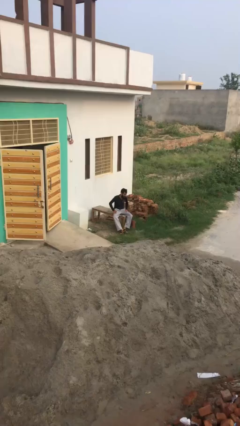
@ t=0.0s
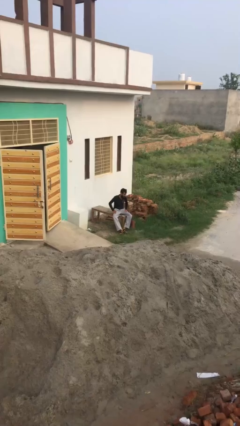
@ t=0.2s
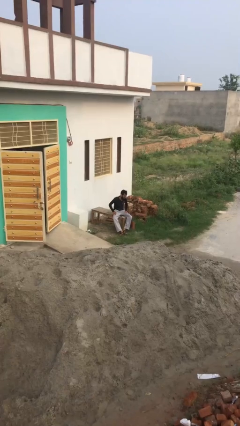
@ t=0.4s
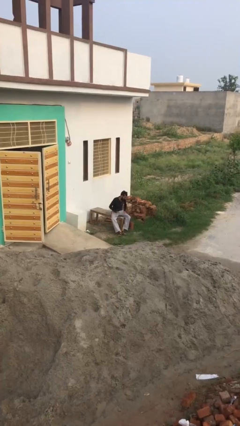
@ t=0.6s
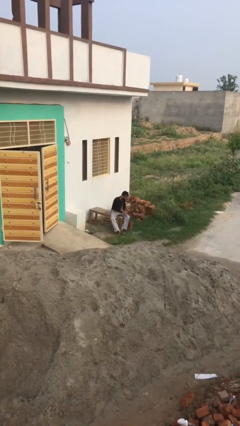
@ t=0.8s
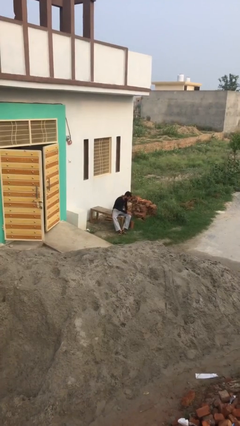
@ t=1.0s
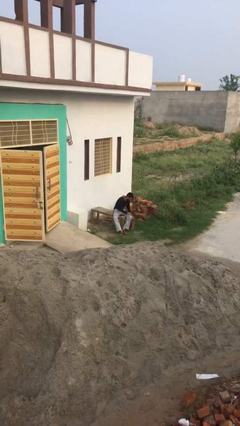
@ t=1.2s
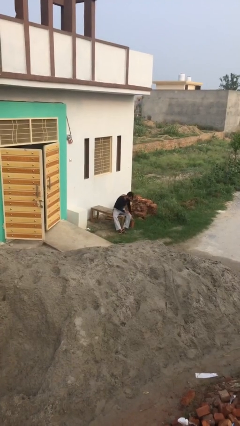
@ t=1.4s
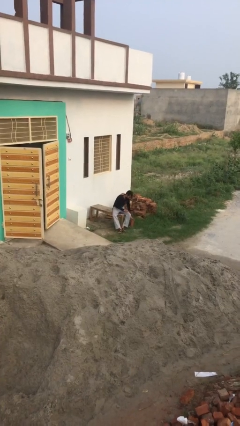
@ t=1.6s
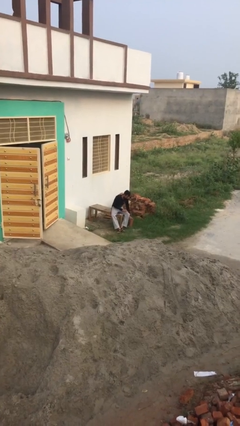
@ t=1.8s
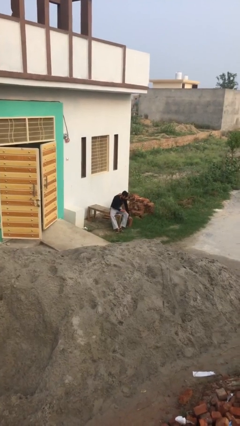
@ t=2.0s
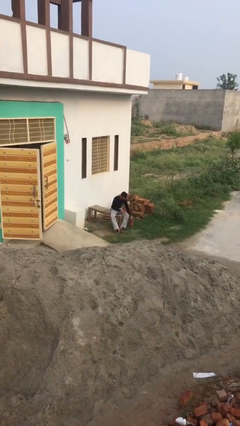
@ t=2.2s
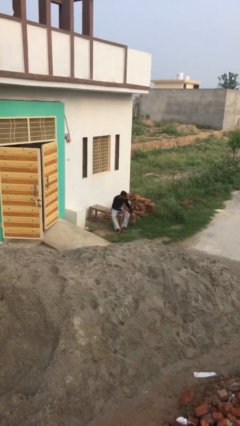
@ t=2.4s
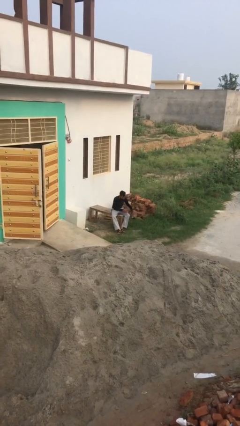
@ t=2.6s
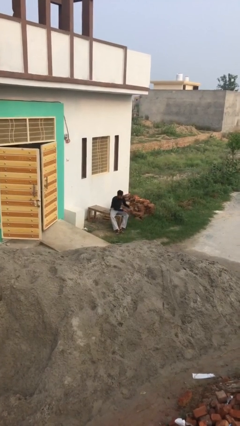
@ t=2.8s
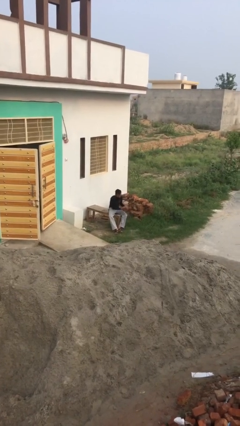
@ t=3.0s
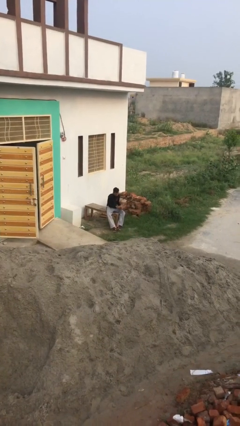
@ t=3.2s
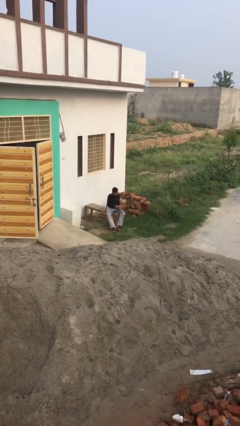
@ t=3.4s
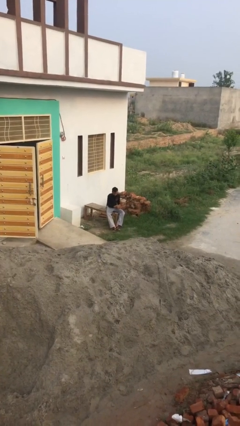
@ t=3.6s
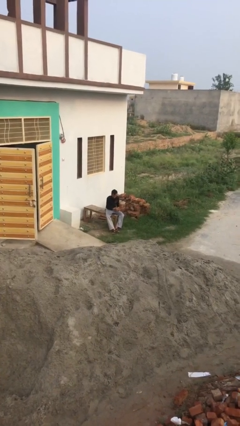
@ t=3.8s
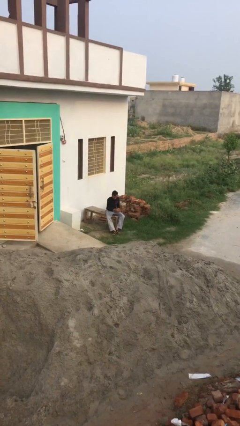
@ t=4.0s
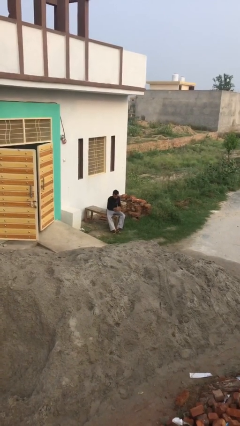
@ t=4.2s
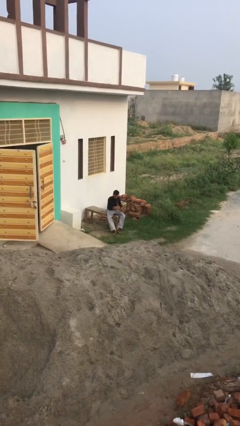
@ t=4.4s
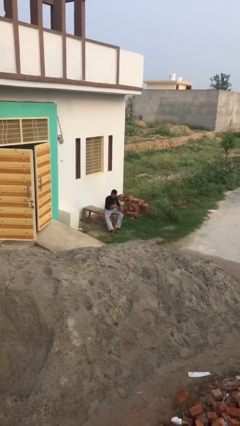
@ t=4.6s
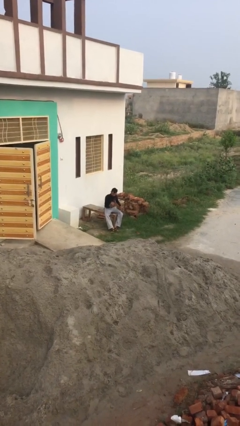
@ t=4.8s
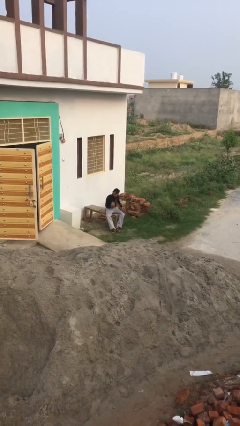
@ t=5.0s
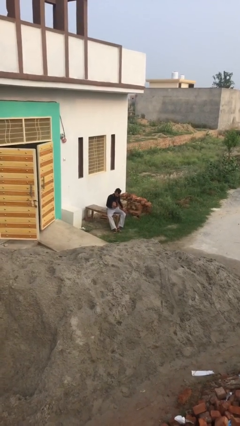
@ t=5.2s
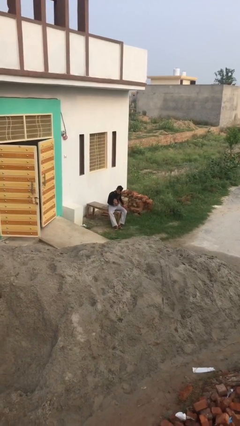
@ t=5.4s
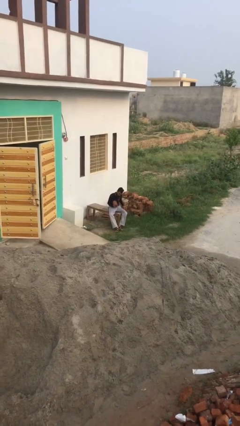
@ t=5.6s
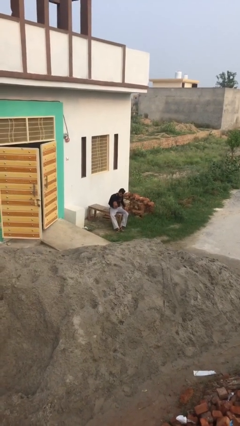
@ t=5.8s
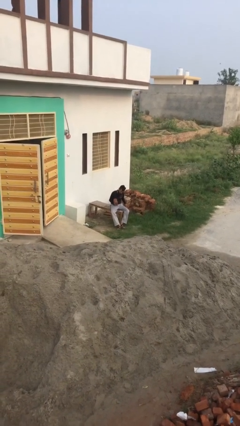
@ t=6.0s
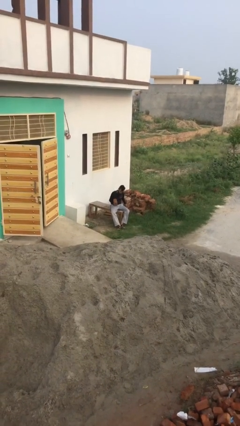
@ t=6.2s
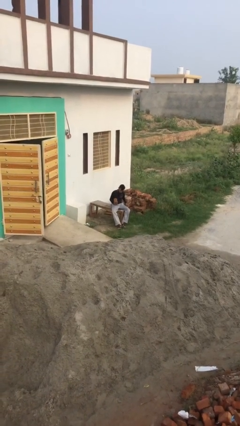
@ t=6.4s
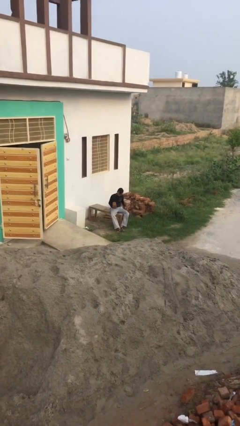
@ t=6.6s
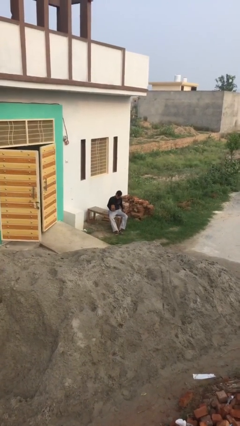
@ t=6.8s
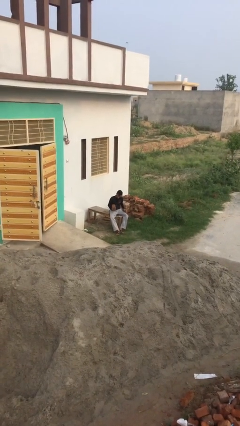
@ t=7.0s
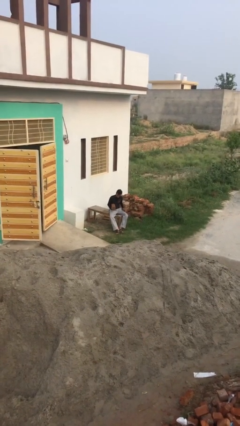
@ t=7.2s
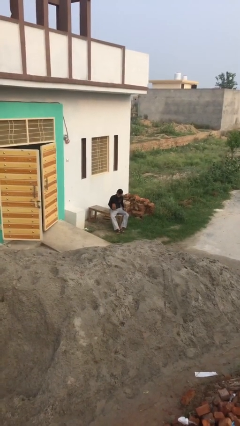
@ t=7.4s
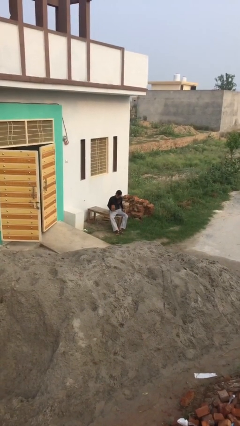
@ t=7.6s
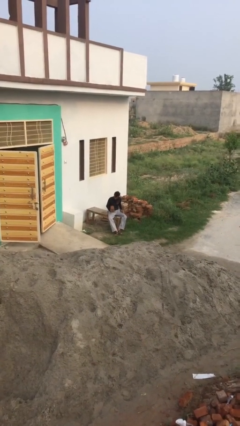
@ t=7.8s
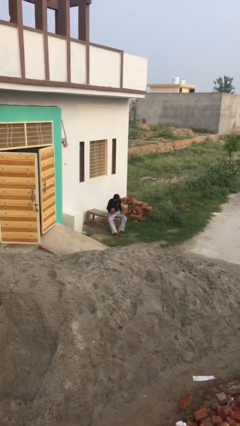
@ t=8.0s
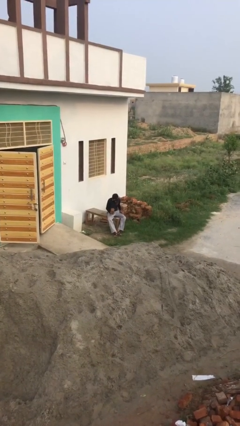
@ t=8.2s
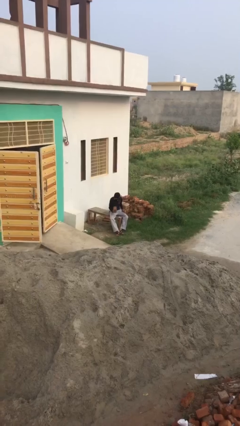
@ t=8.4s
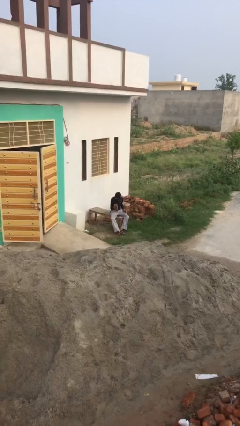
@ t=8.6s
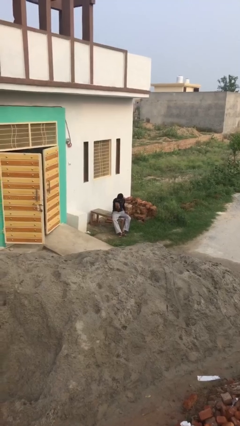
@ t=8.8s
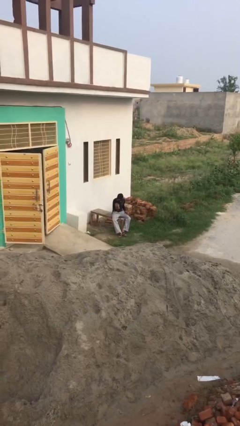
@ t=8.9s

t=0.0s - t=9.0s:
person picks up object from floor

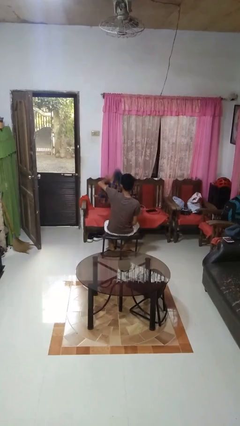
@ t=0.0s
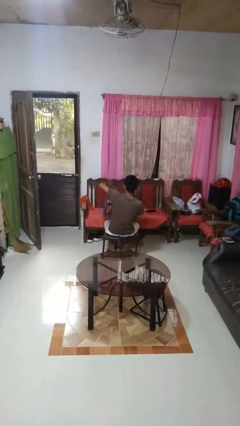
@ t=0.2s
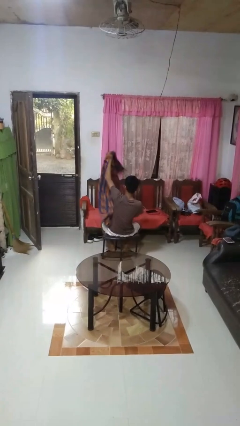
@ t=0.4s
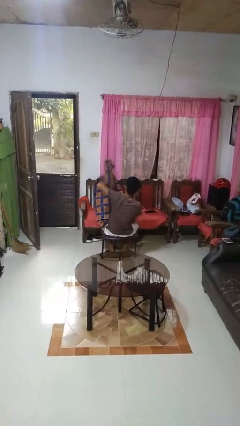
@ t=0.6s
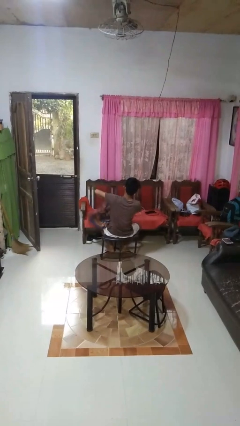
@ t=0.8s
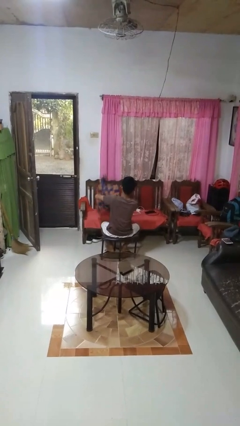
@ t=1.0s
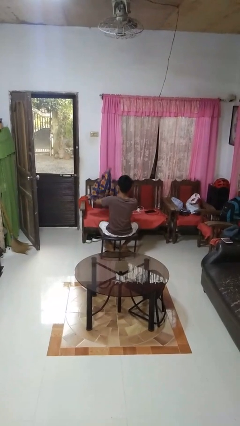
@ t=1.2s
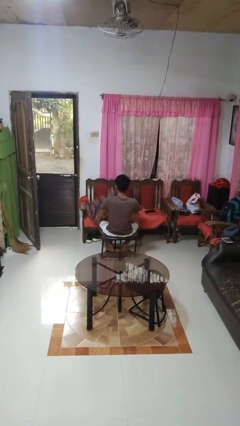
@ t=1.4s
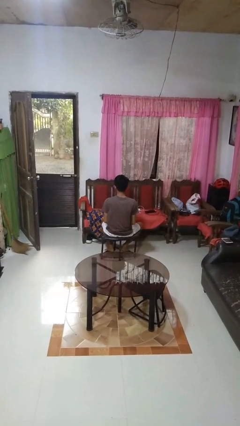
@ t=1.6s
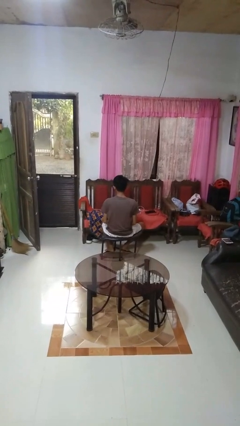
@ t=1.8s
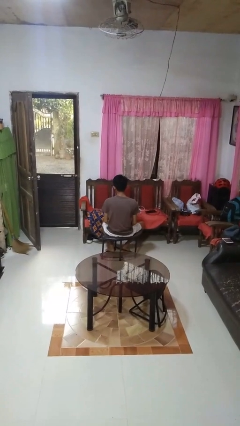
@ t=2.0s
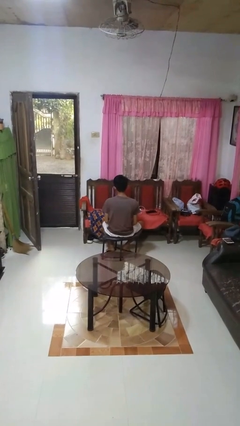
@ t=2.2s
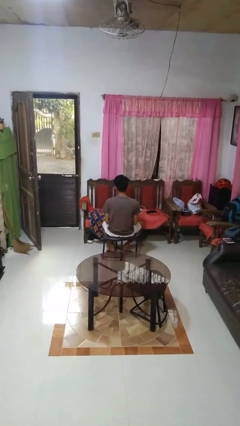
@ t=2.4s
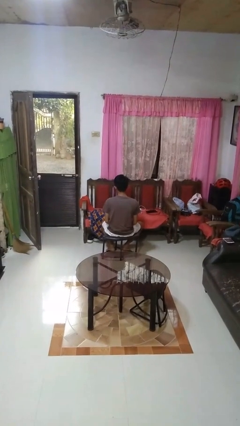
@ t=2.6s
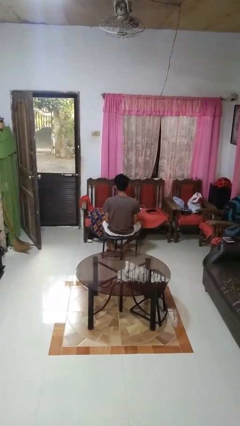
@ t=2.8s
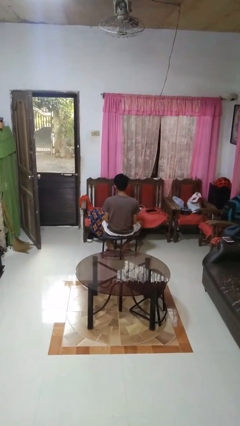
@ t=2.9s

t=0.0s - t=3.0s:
person unfolds blanket

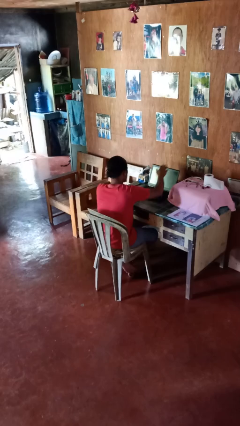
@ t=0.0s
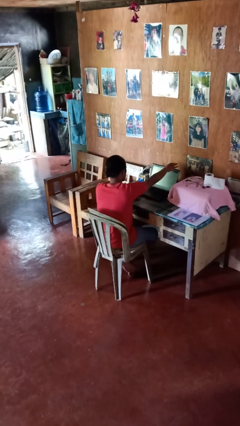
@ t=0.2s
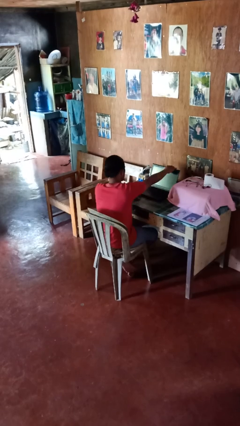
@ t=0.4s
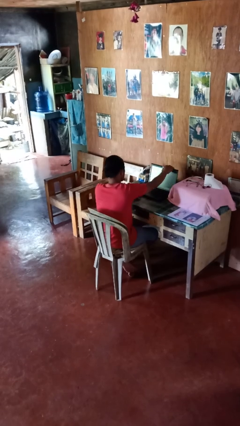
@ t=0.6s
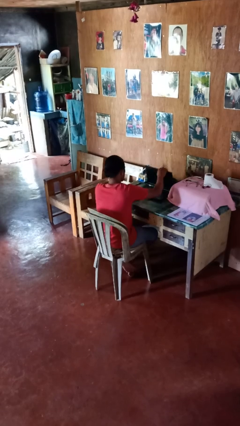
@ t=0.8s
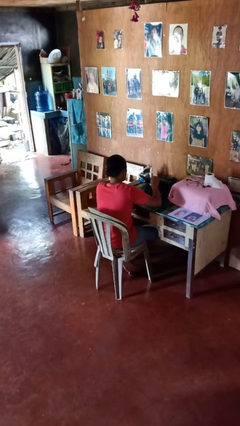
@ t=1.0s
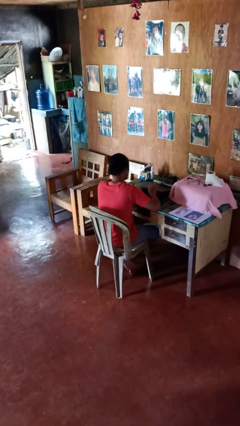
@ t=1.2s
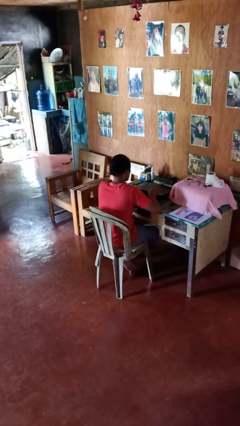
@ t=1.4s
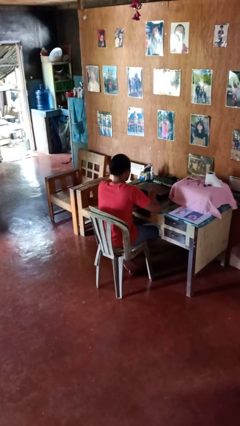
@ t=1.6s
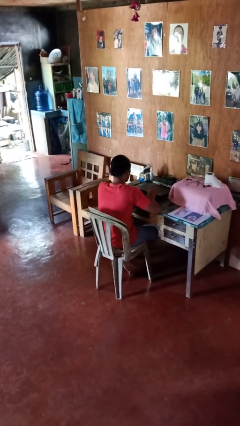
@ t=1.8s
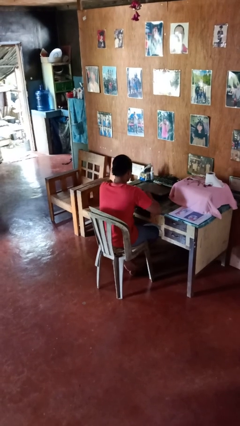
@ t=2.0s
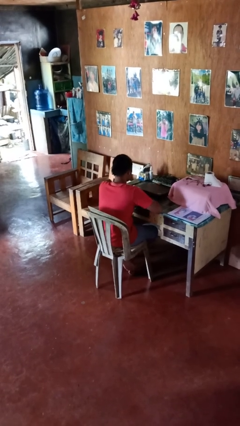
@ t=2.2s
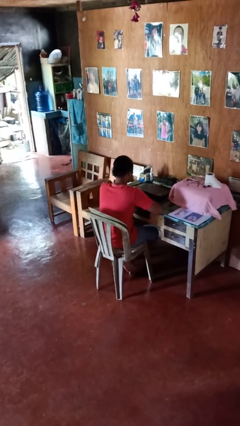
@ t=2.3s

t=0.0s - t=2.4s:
person closes laptop

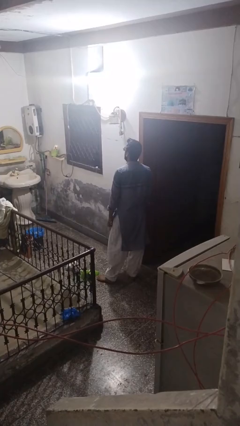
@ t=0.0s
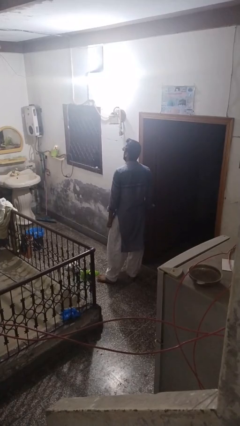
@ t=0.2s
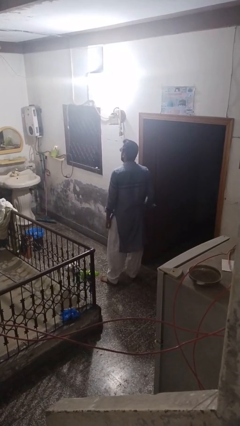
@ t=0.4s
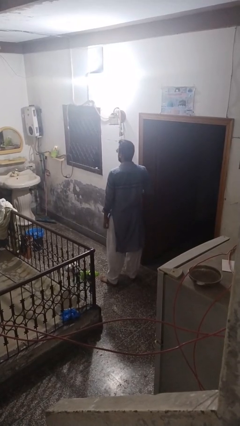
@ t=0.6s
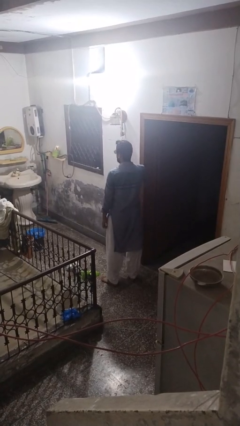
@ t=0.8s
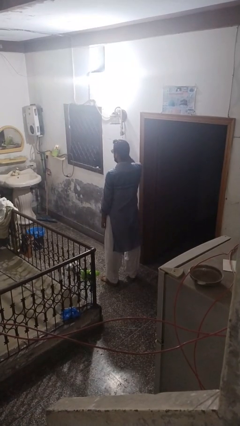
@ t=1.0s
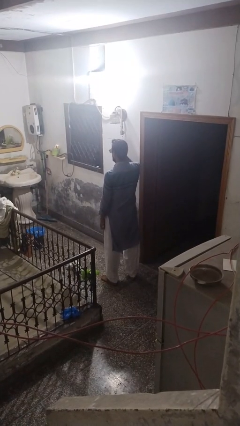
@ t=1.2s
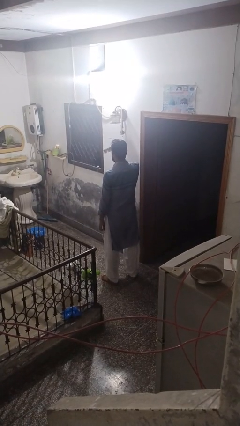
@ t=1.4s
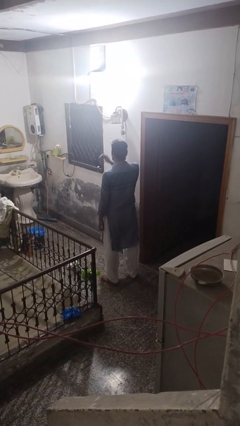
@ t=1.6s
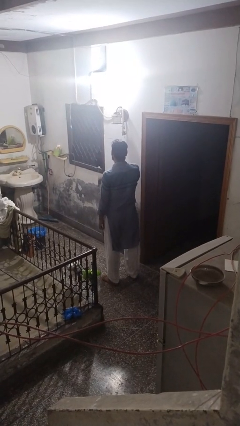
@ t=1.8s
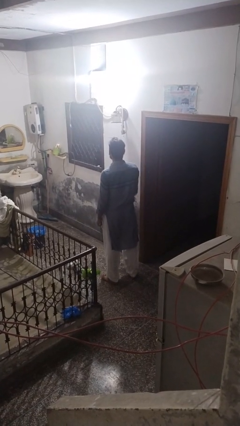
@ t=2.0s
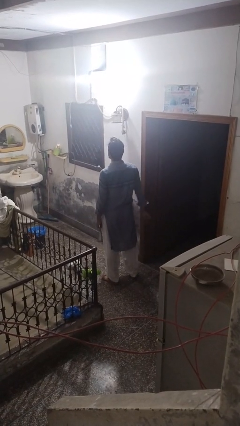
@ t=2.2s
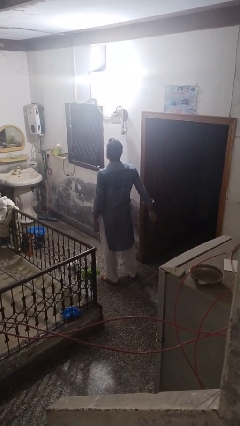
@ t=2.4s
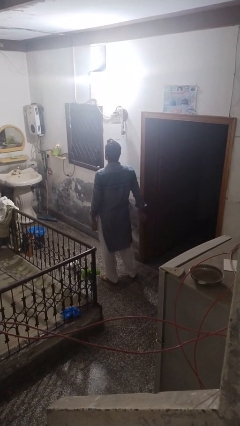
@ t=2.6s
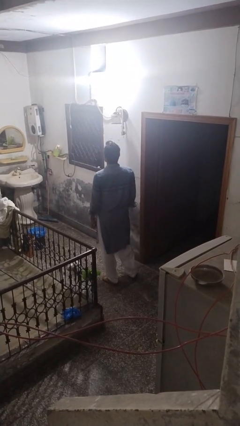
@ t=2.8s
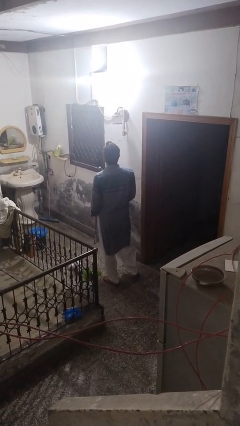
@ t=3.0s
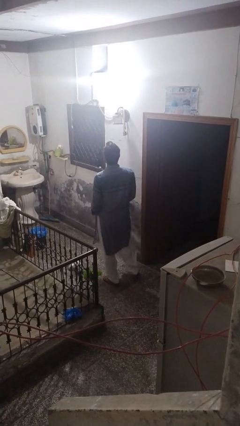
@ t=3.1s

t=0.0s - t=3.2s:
person takes off sunglasses
